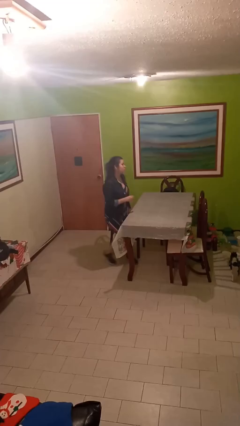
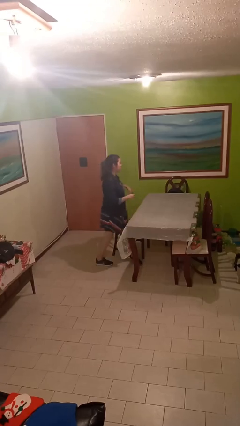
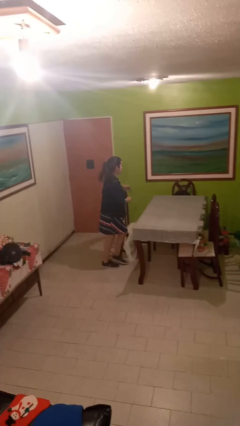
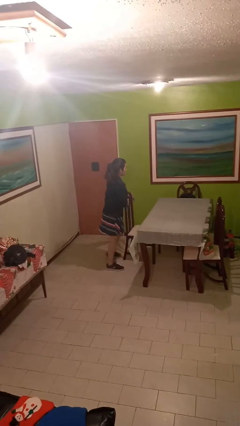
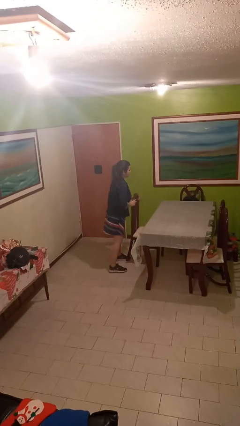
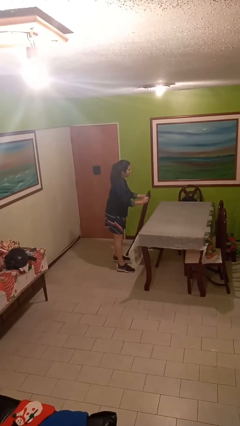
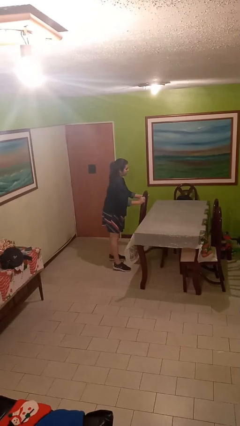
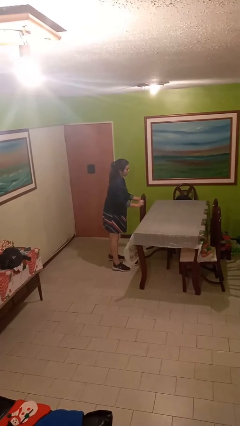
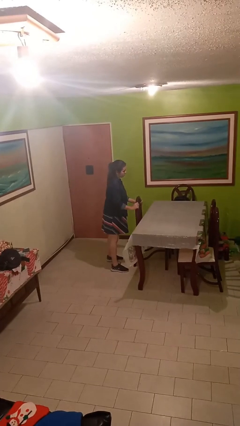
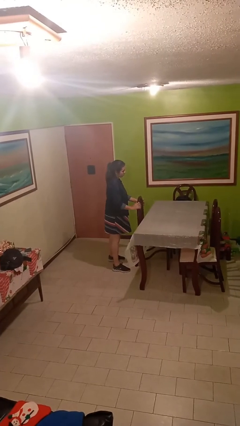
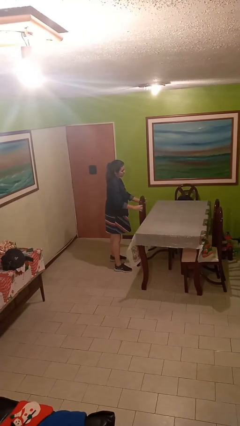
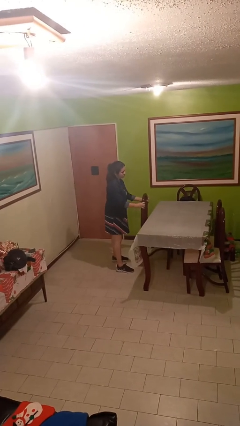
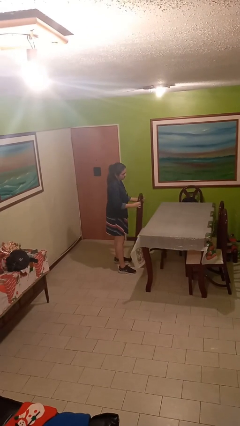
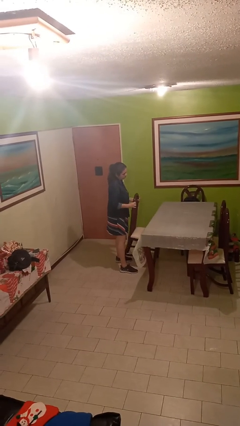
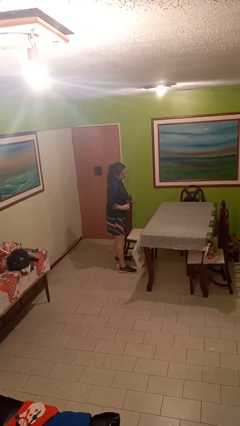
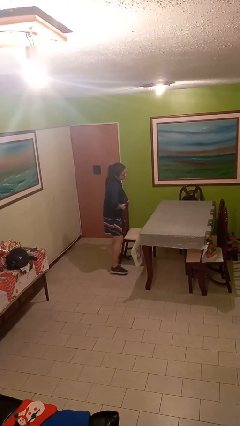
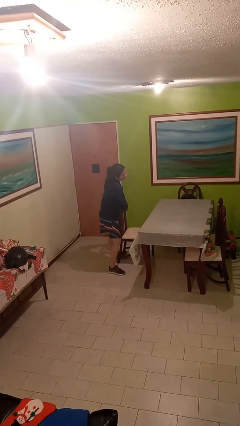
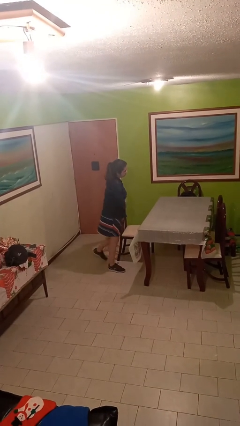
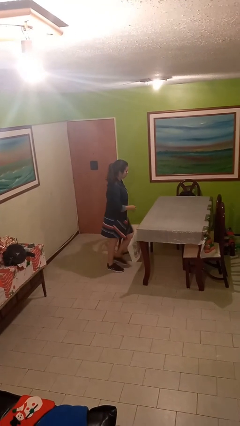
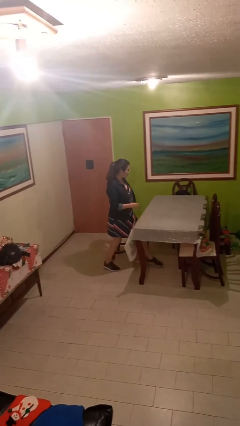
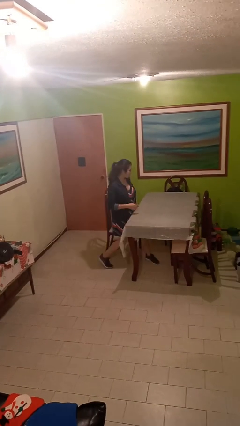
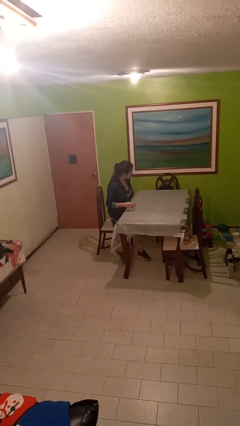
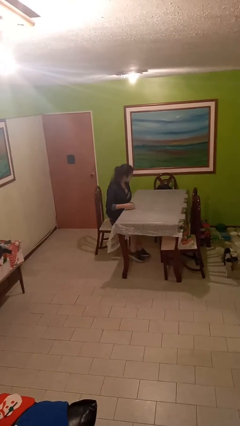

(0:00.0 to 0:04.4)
person stands up

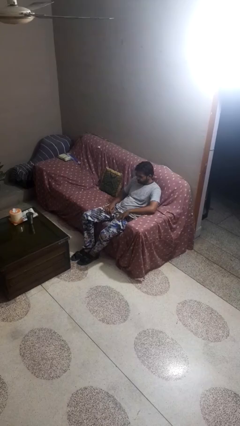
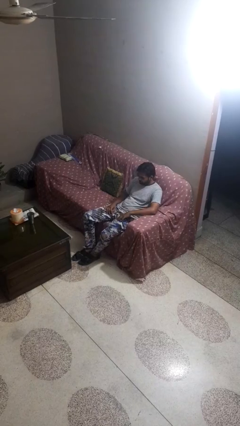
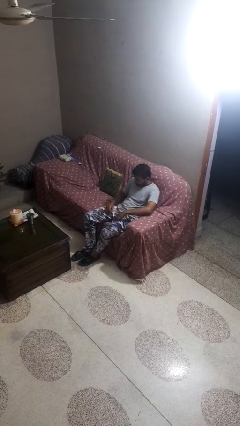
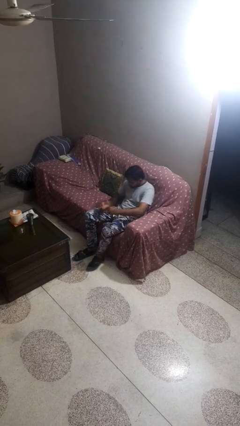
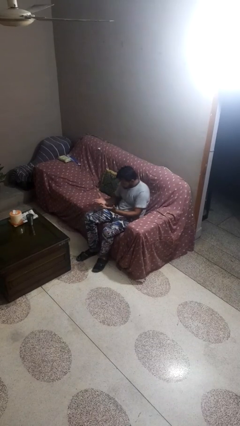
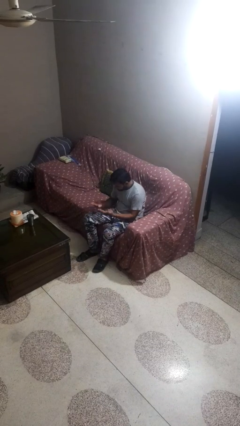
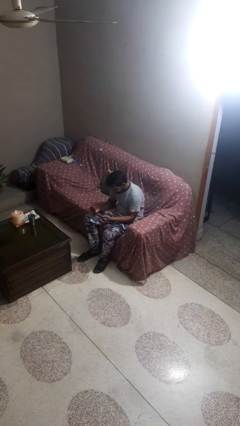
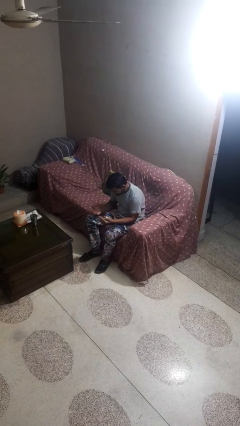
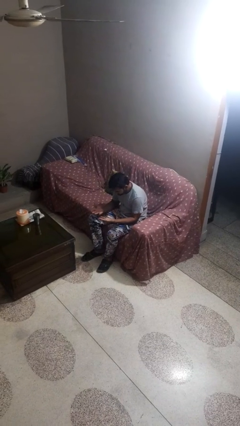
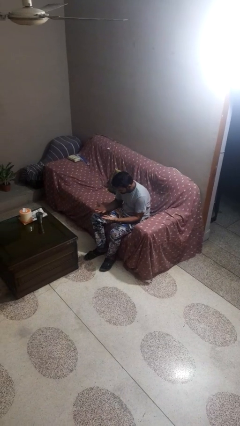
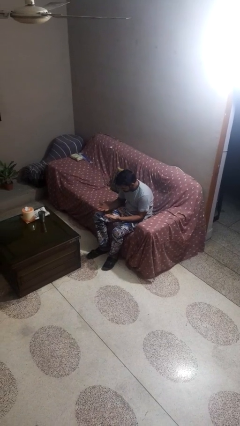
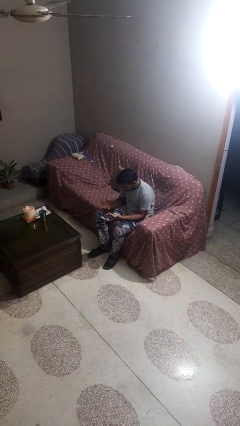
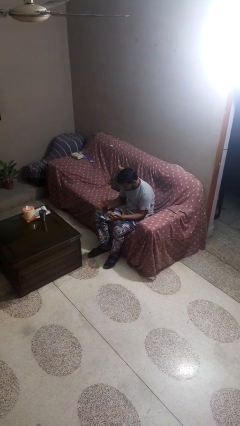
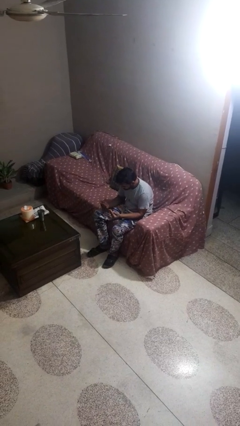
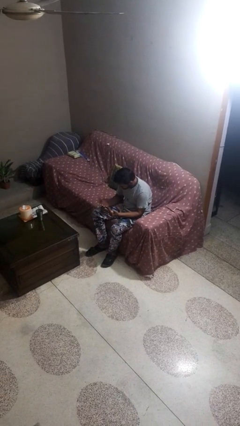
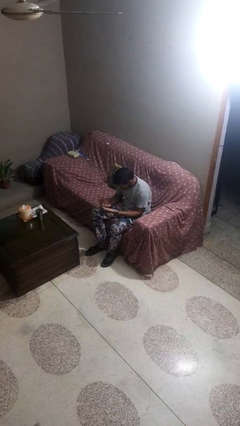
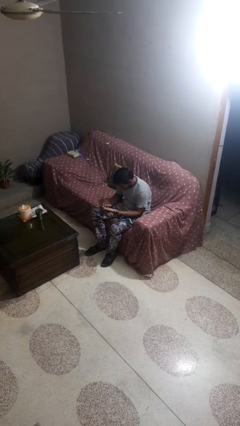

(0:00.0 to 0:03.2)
person looks at hands in lap

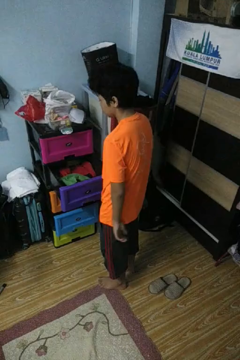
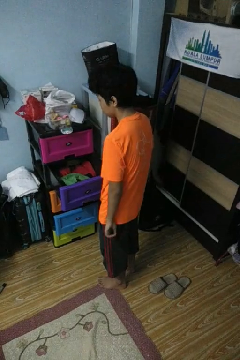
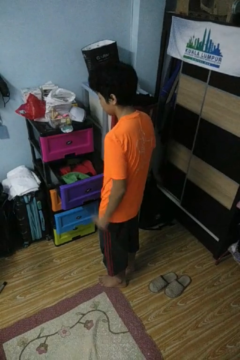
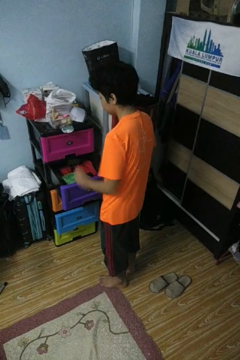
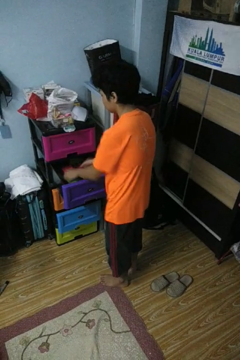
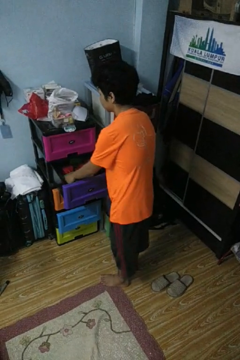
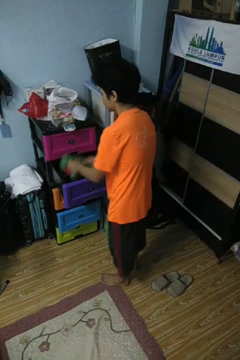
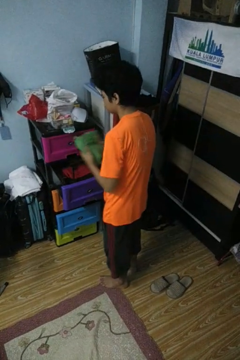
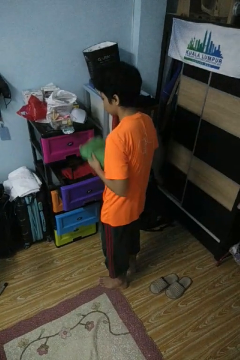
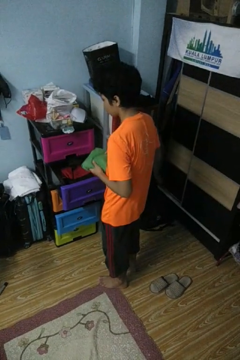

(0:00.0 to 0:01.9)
person takes clothes from dresser

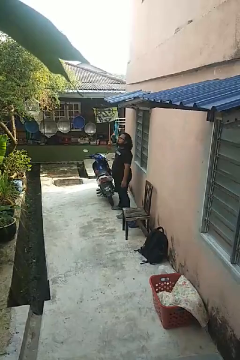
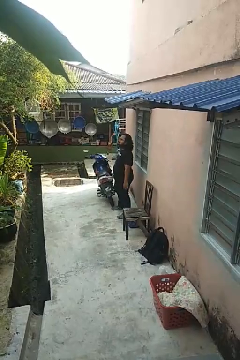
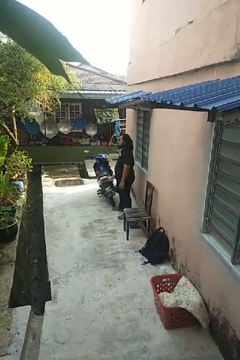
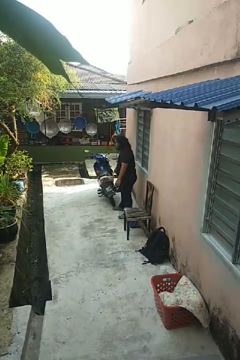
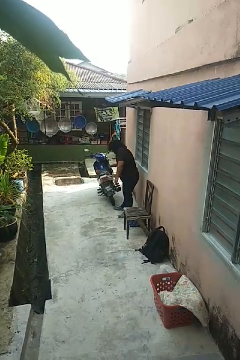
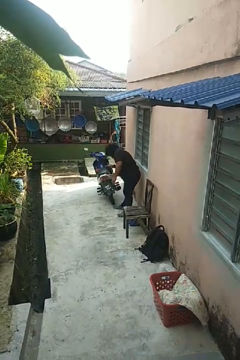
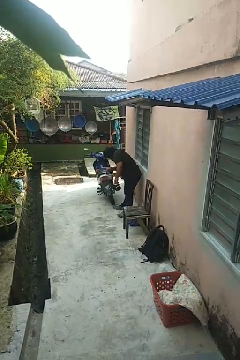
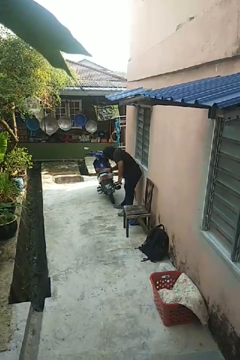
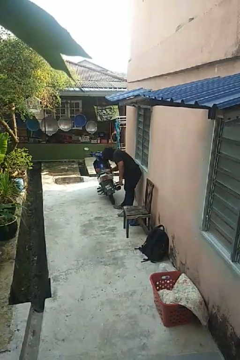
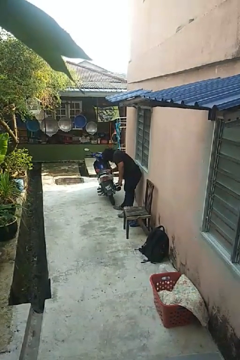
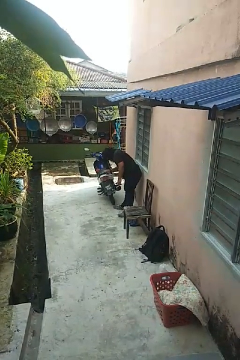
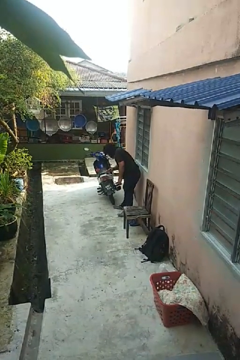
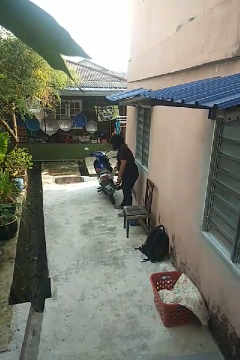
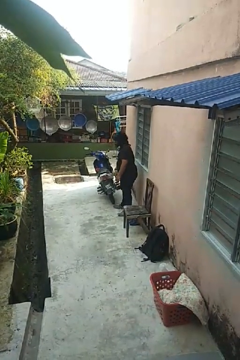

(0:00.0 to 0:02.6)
person taps object with finger

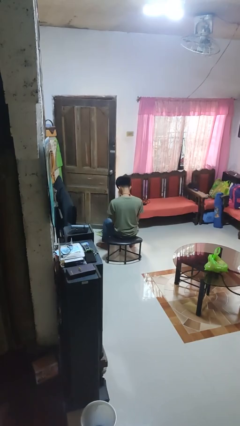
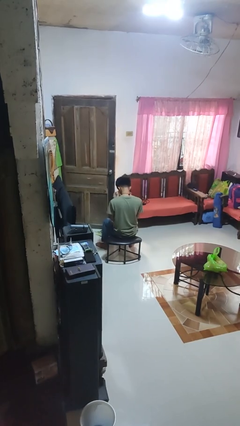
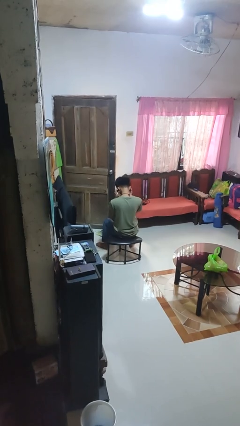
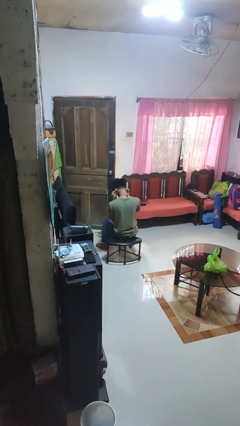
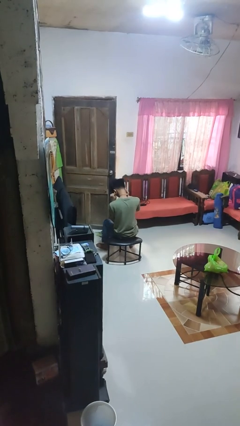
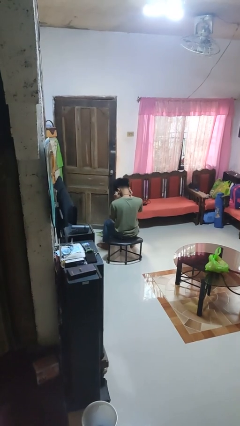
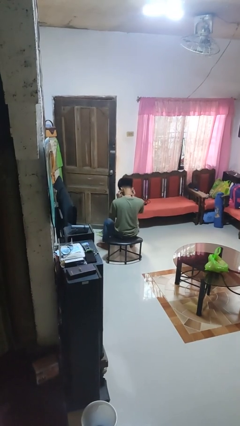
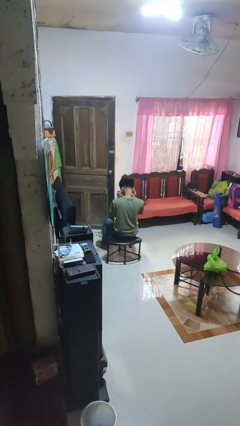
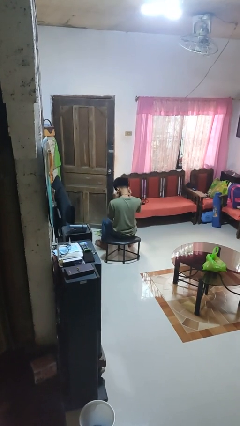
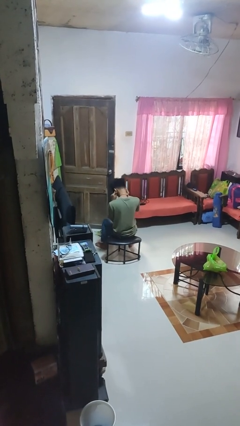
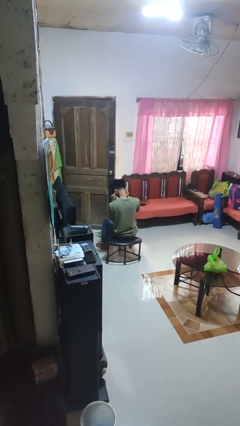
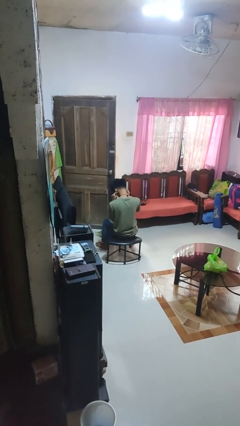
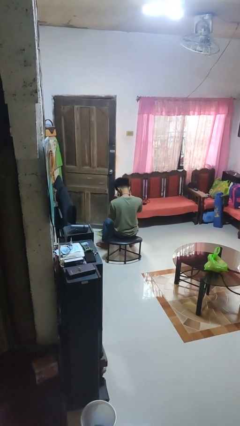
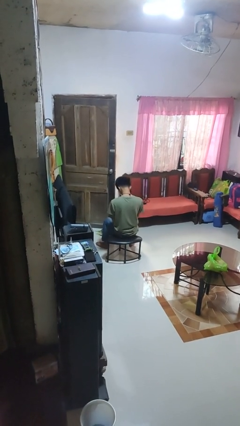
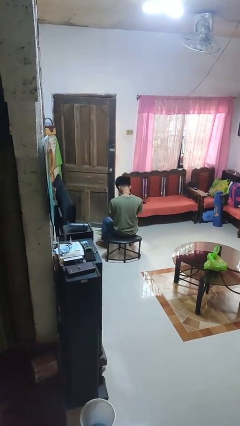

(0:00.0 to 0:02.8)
person puts fingers in ear

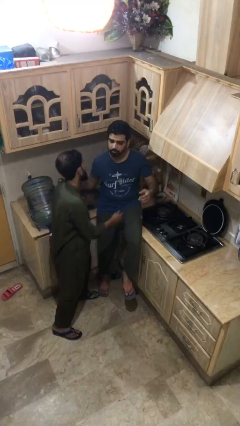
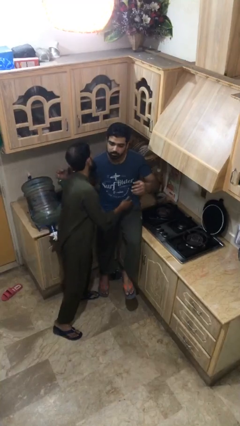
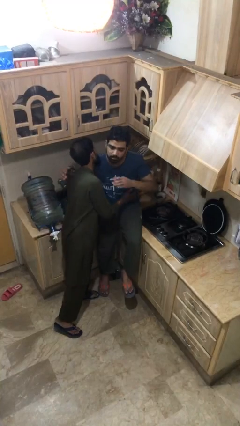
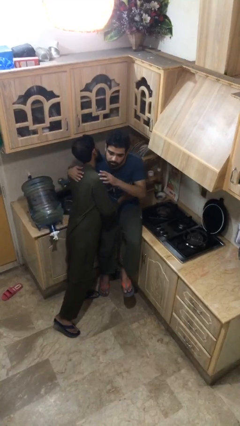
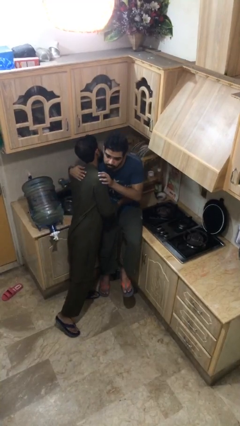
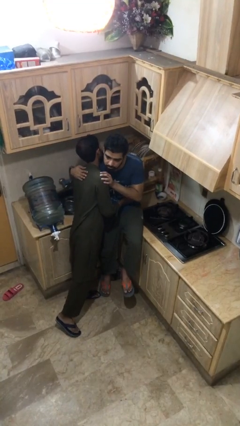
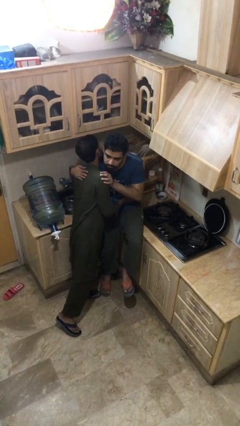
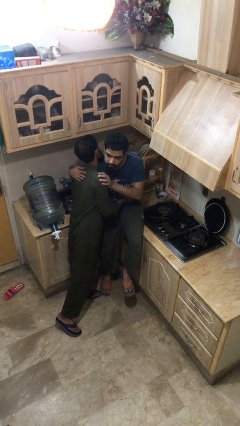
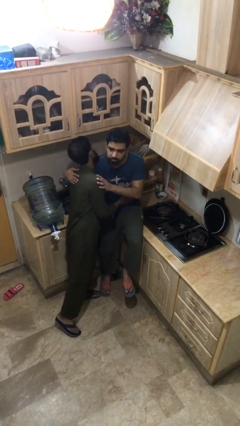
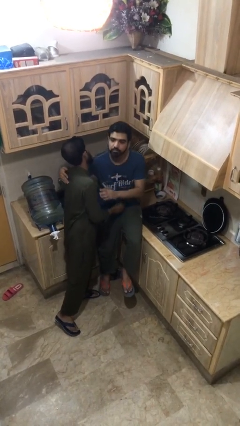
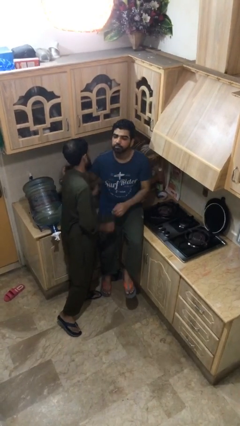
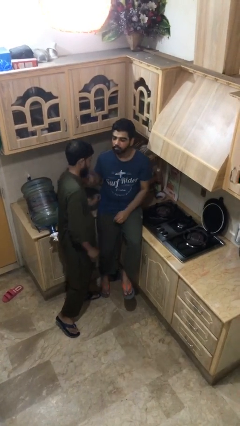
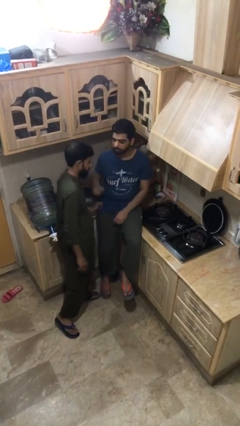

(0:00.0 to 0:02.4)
person embraces person

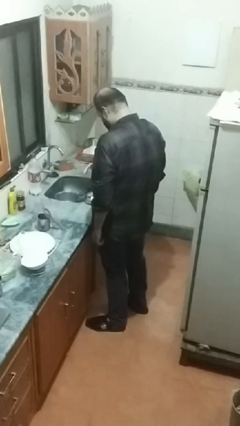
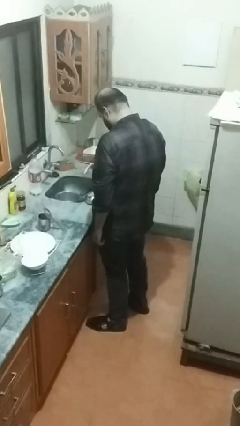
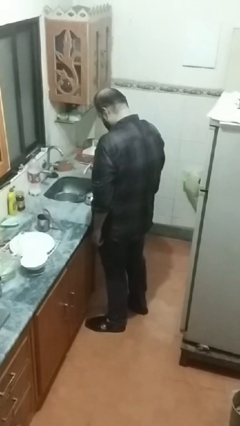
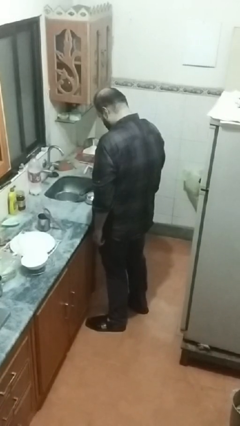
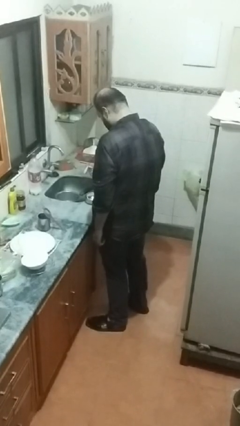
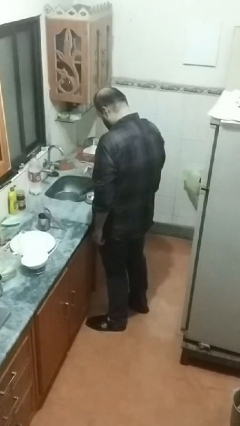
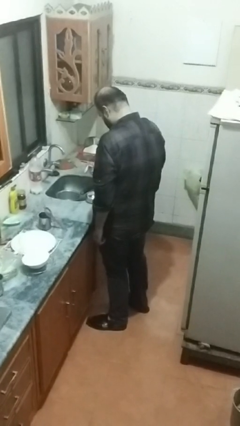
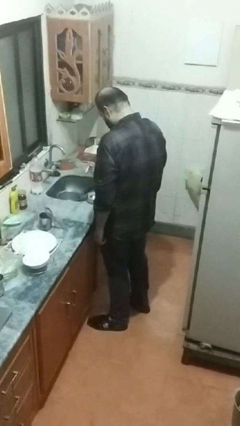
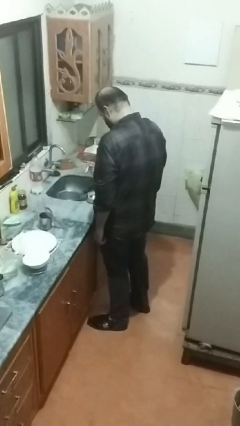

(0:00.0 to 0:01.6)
person pours into bowl
